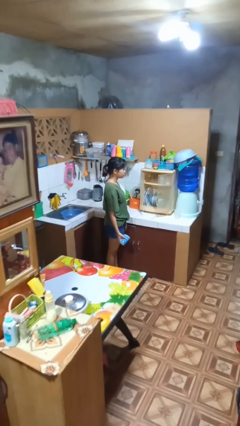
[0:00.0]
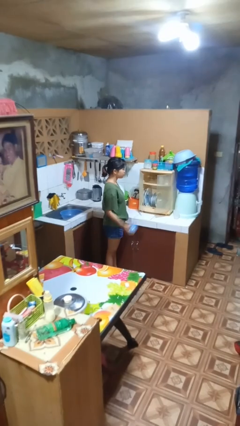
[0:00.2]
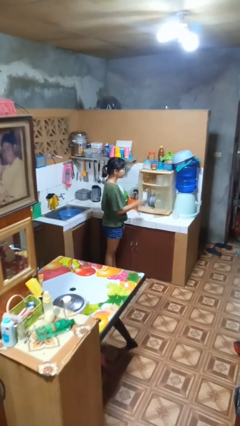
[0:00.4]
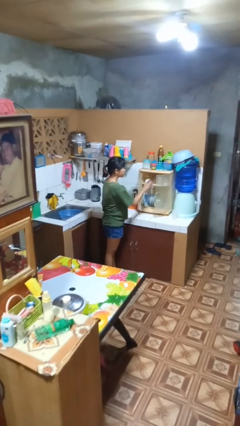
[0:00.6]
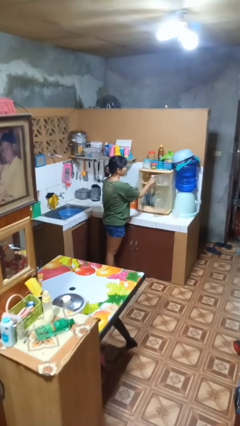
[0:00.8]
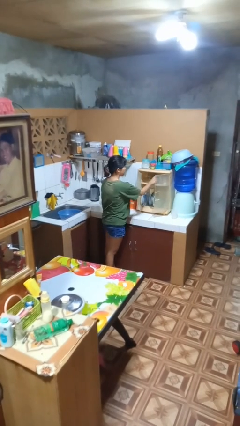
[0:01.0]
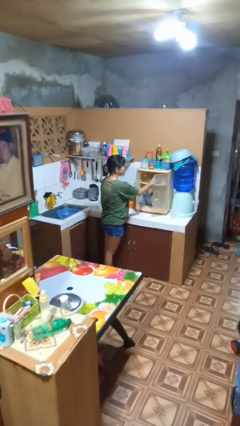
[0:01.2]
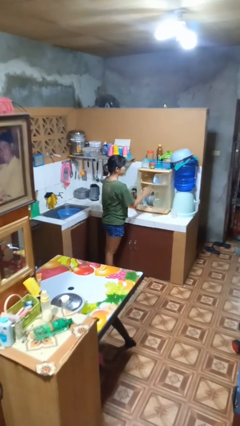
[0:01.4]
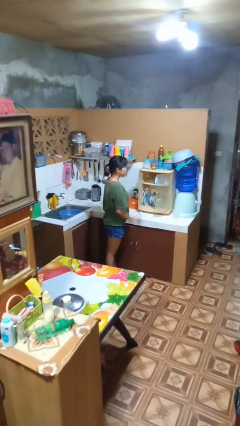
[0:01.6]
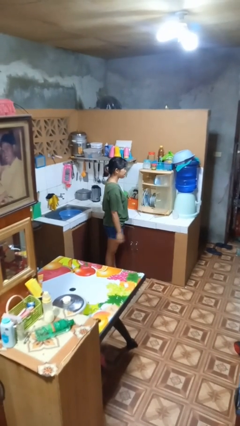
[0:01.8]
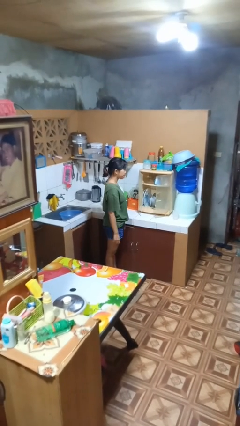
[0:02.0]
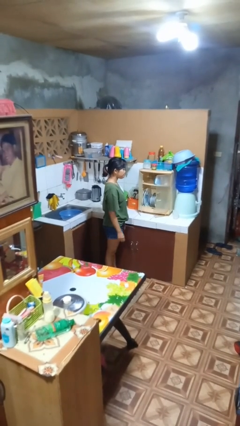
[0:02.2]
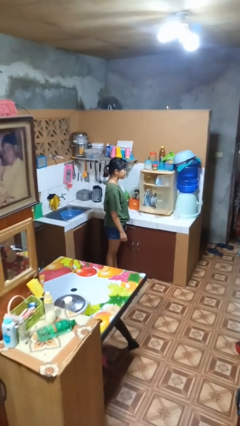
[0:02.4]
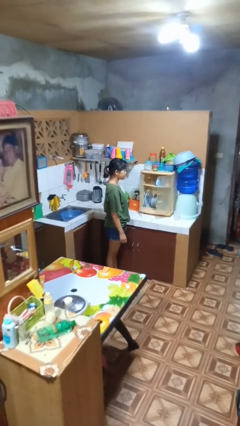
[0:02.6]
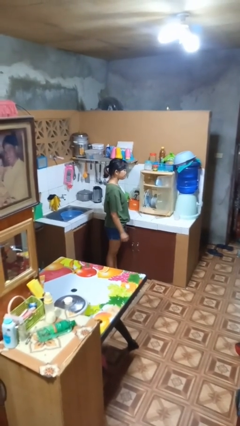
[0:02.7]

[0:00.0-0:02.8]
person puts object in cabinet

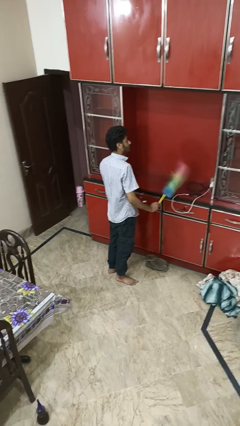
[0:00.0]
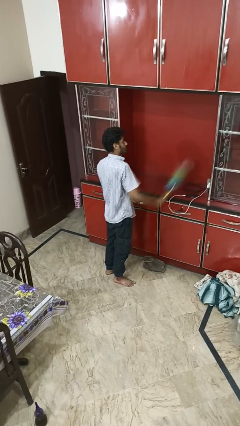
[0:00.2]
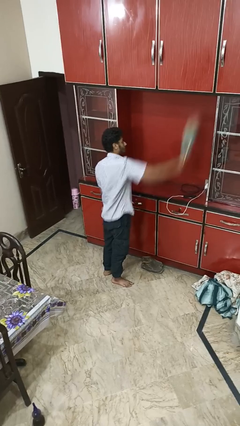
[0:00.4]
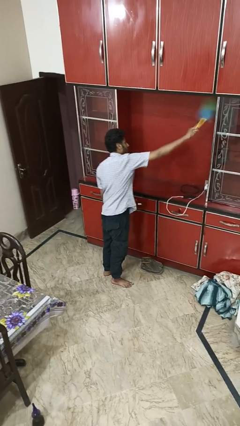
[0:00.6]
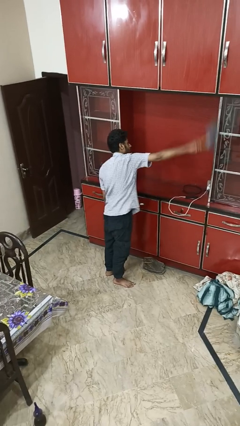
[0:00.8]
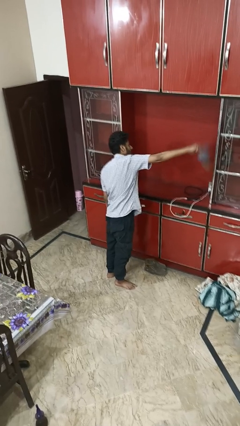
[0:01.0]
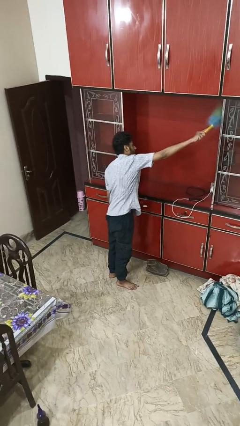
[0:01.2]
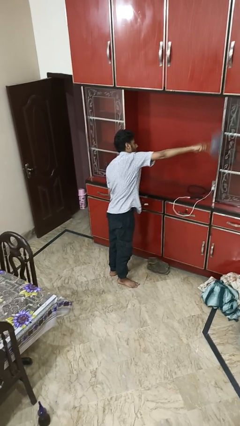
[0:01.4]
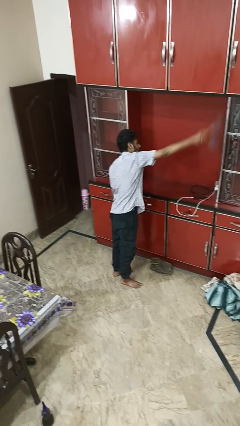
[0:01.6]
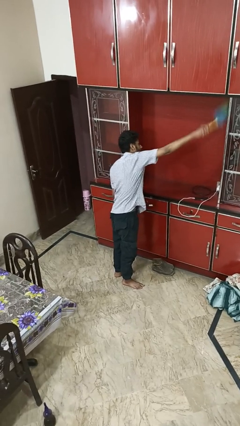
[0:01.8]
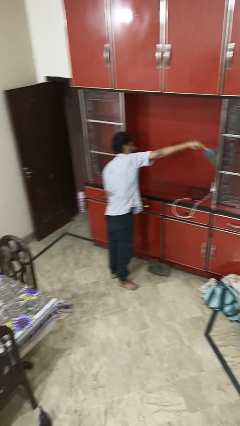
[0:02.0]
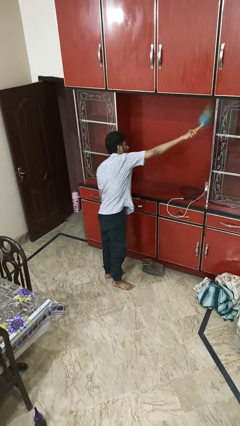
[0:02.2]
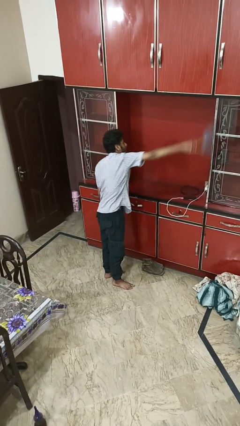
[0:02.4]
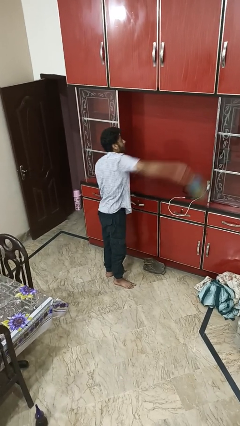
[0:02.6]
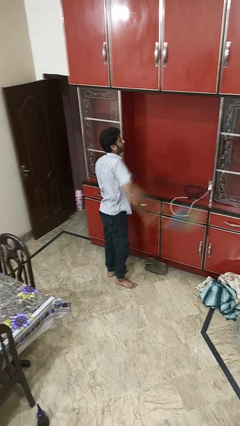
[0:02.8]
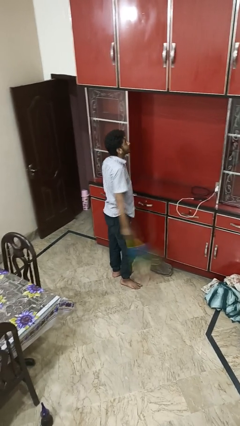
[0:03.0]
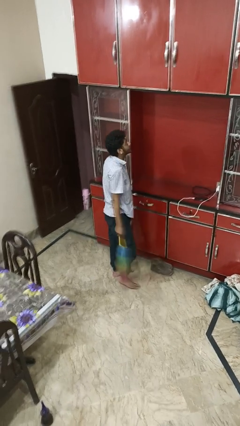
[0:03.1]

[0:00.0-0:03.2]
person dusts furniture

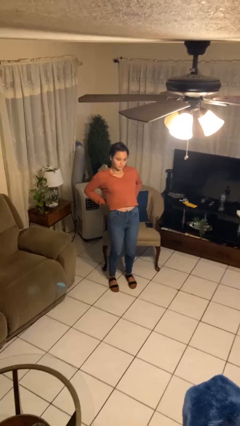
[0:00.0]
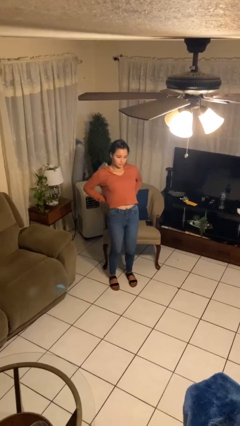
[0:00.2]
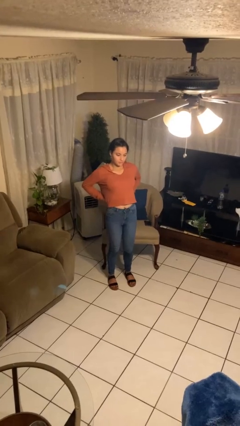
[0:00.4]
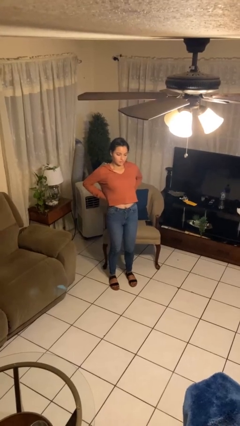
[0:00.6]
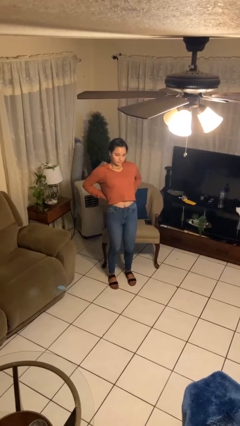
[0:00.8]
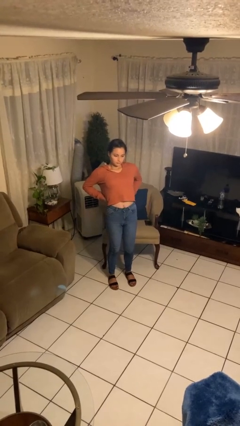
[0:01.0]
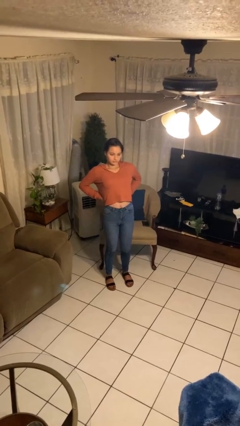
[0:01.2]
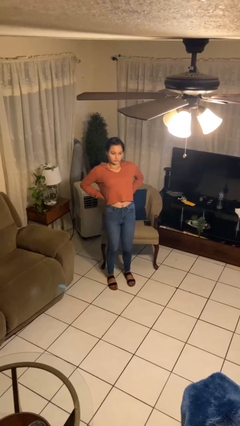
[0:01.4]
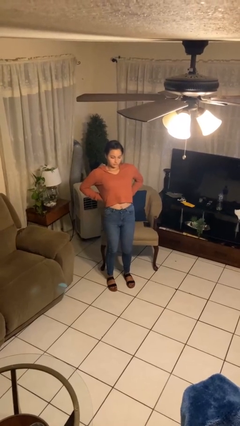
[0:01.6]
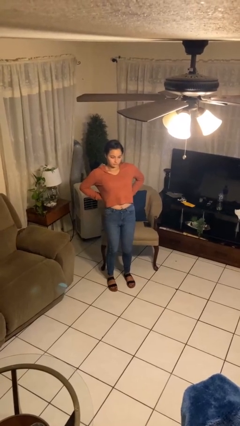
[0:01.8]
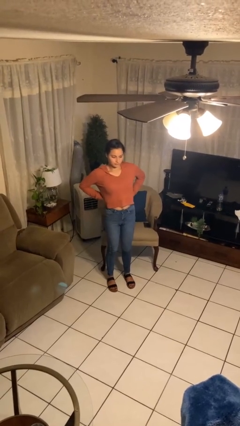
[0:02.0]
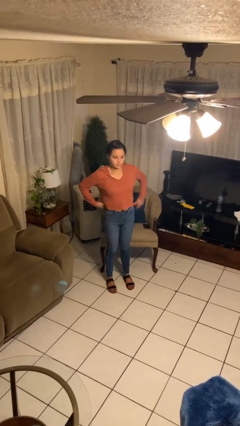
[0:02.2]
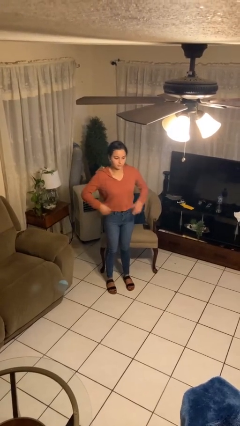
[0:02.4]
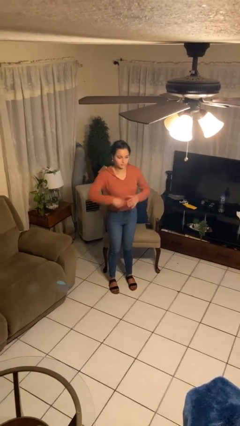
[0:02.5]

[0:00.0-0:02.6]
person stretches back

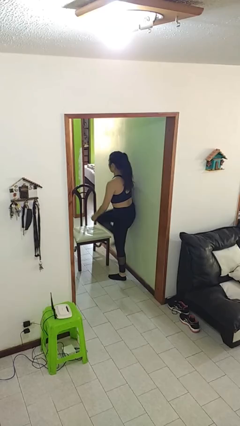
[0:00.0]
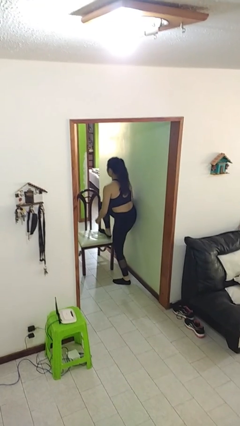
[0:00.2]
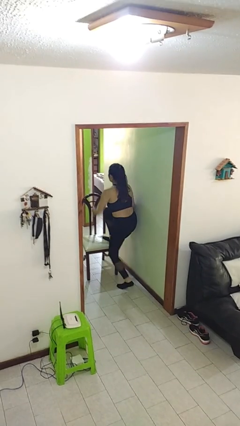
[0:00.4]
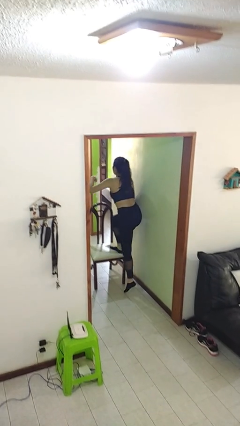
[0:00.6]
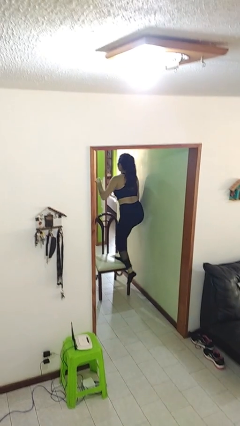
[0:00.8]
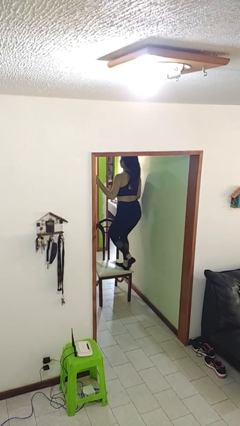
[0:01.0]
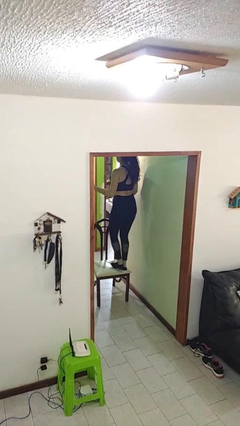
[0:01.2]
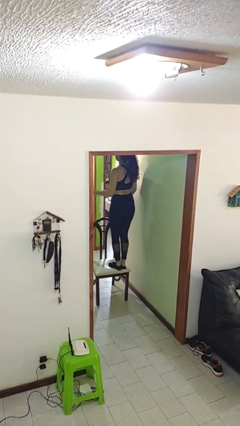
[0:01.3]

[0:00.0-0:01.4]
person climbs on chair

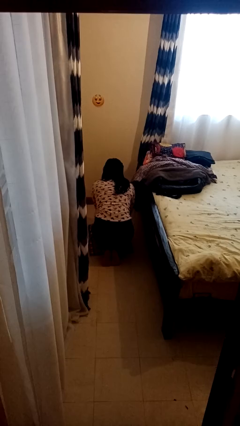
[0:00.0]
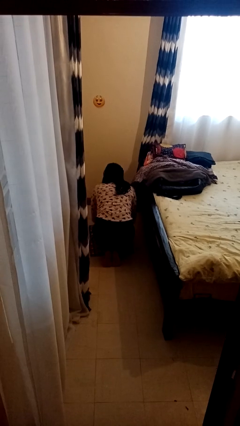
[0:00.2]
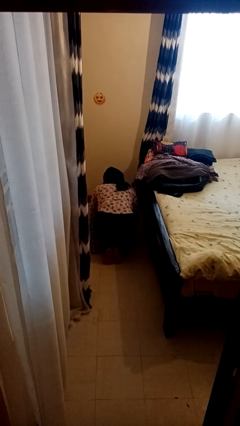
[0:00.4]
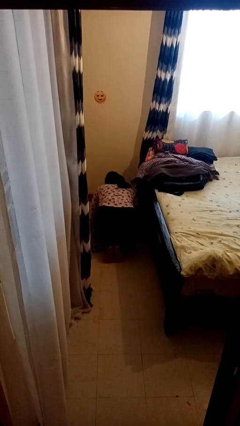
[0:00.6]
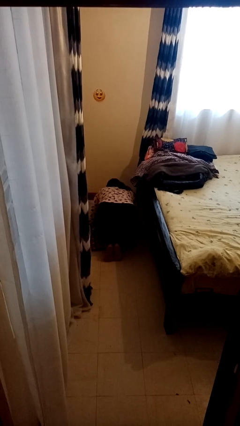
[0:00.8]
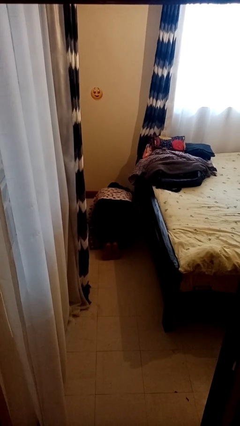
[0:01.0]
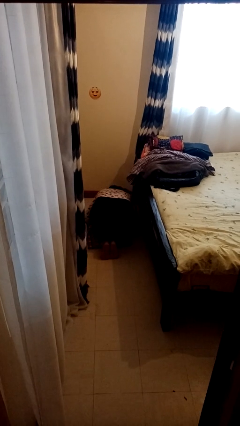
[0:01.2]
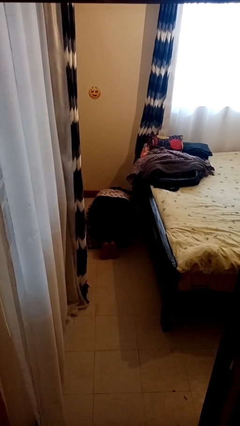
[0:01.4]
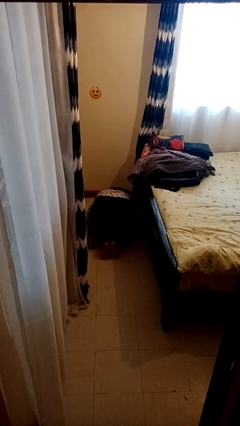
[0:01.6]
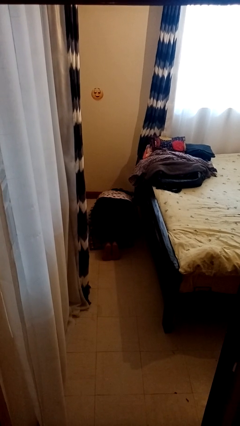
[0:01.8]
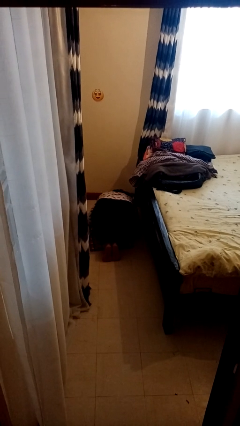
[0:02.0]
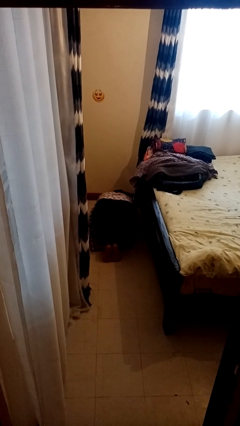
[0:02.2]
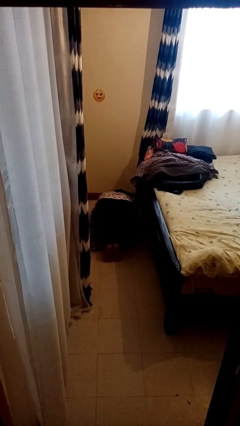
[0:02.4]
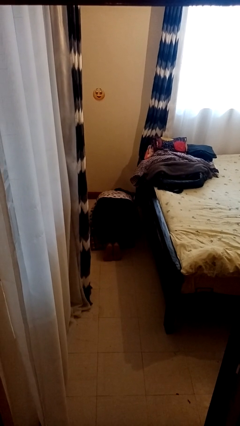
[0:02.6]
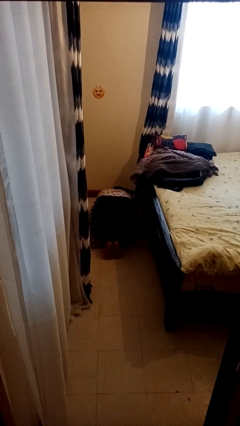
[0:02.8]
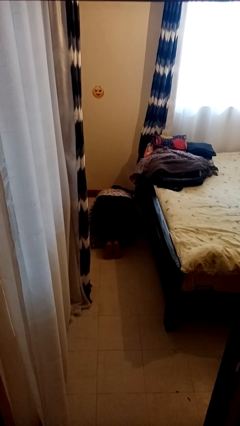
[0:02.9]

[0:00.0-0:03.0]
person searches under bed

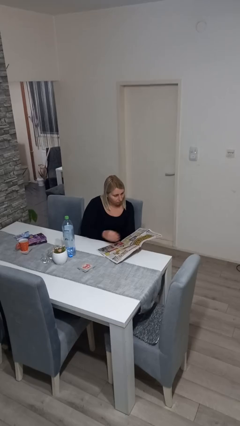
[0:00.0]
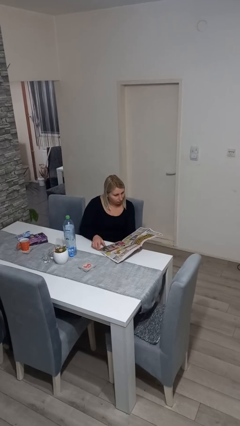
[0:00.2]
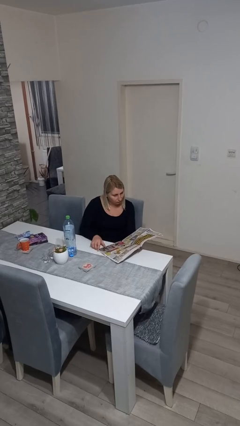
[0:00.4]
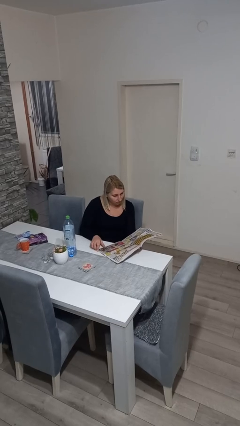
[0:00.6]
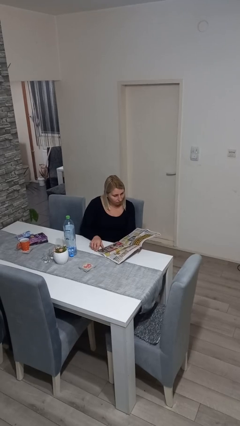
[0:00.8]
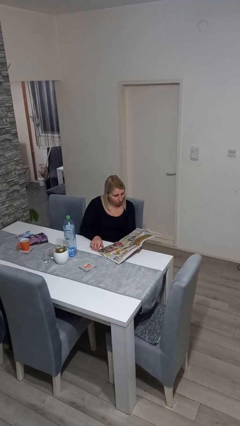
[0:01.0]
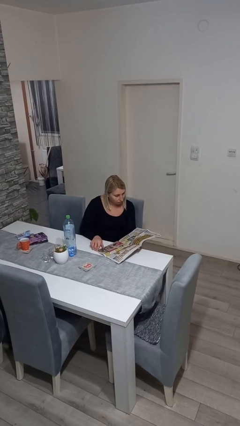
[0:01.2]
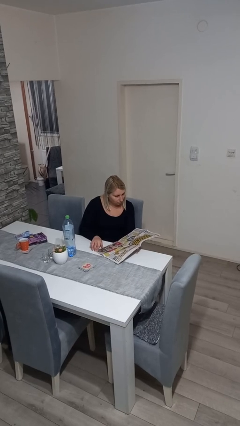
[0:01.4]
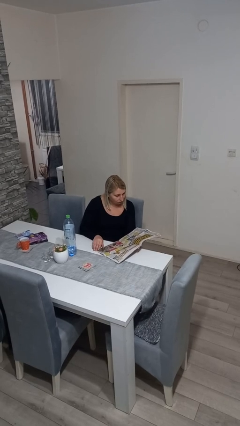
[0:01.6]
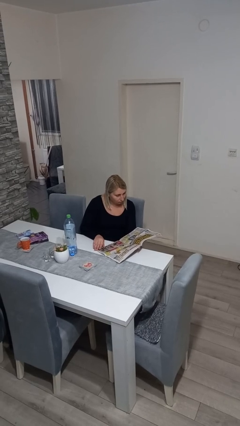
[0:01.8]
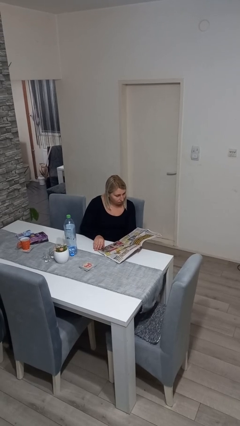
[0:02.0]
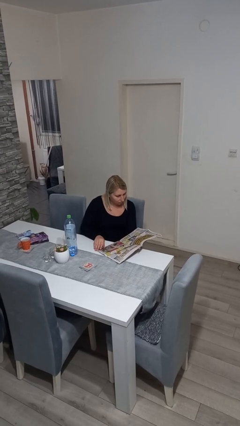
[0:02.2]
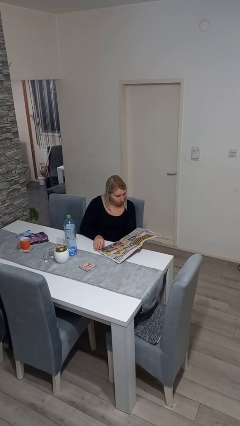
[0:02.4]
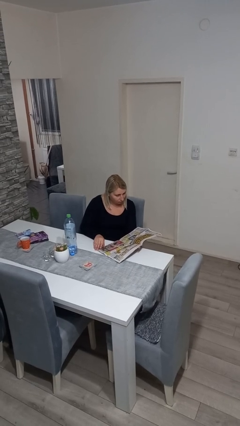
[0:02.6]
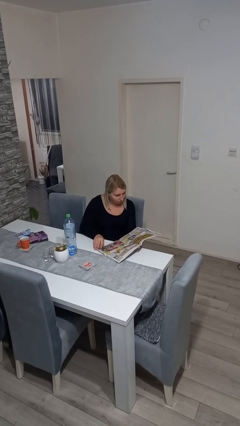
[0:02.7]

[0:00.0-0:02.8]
person reads newspaper

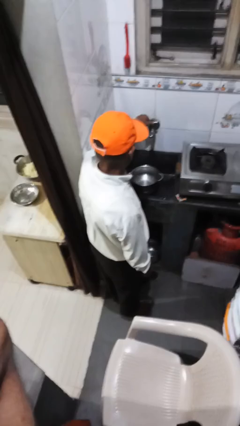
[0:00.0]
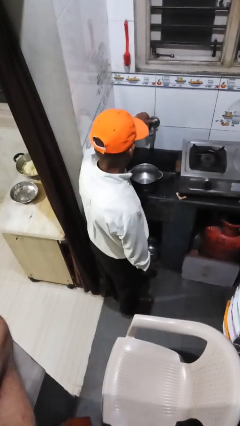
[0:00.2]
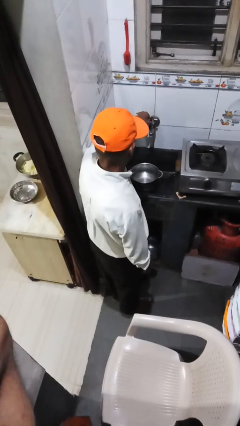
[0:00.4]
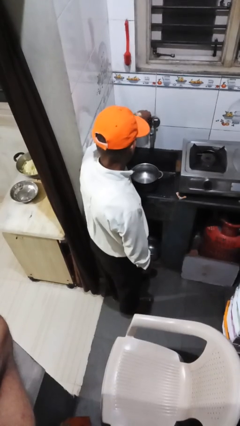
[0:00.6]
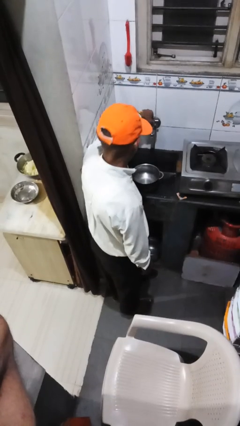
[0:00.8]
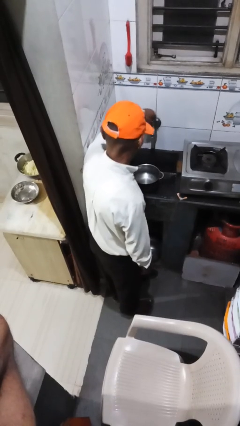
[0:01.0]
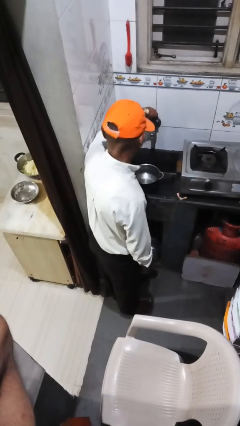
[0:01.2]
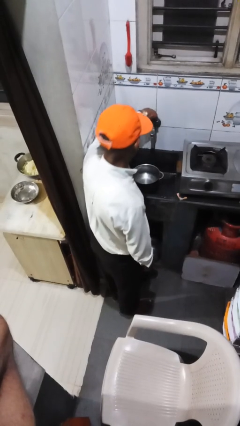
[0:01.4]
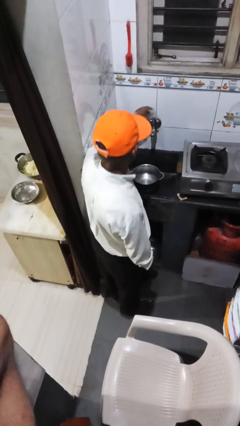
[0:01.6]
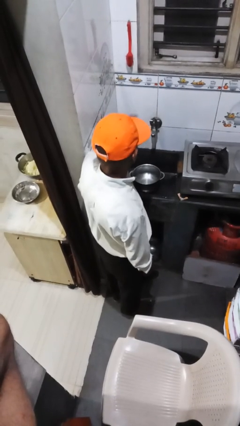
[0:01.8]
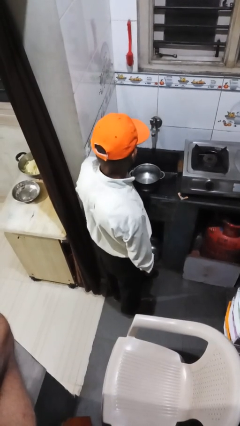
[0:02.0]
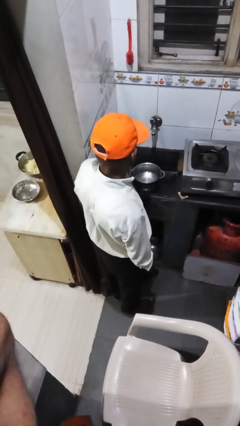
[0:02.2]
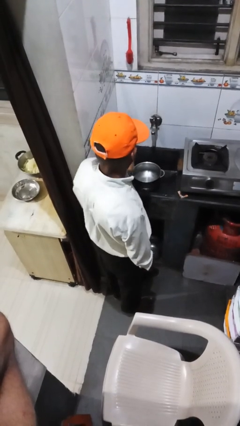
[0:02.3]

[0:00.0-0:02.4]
person turns off faucet
